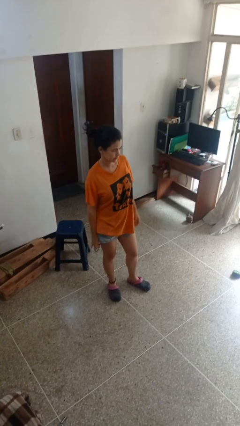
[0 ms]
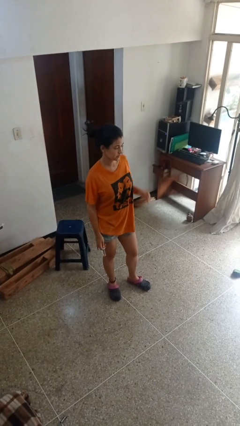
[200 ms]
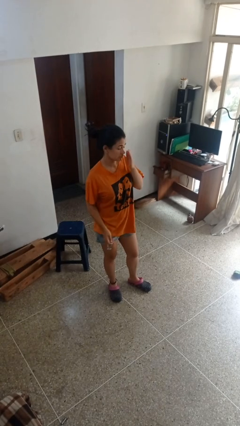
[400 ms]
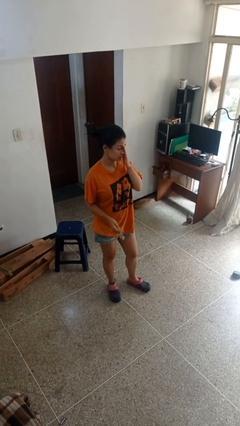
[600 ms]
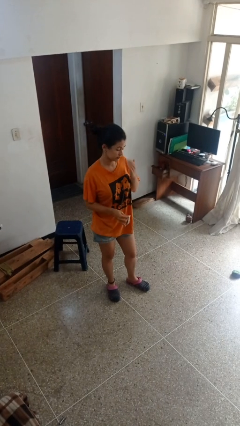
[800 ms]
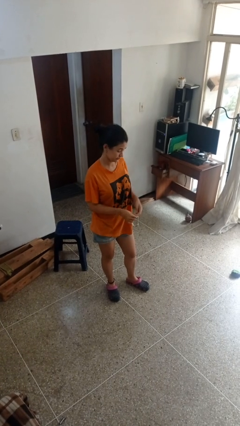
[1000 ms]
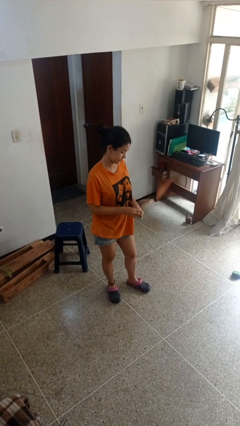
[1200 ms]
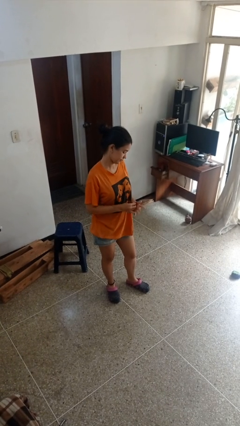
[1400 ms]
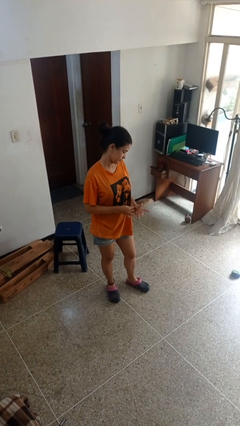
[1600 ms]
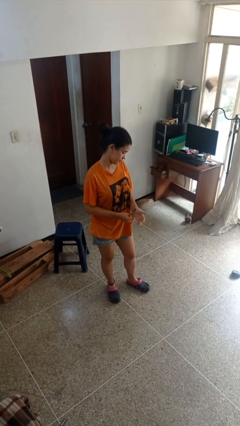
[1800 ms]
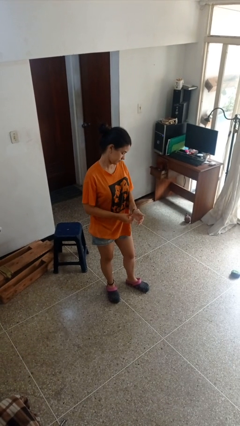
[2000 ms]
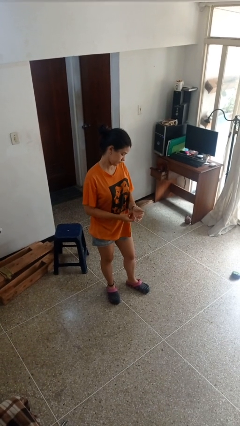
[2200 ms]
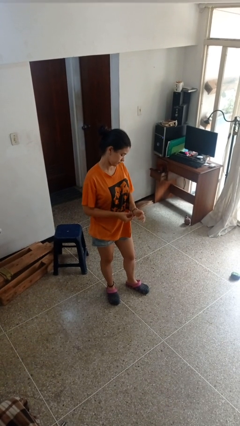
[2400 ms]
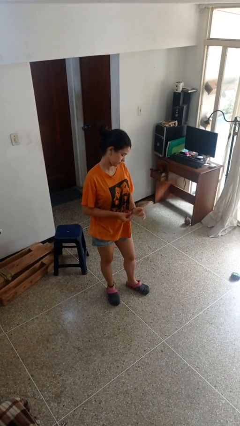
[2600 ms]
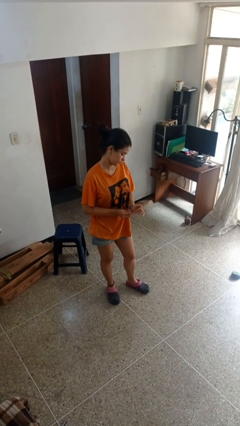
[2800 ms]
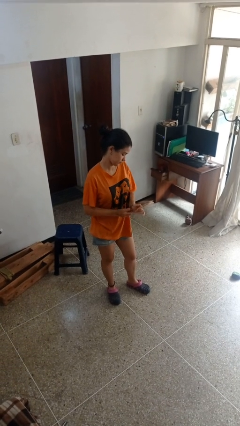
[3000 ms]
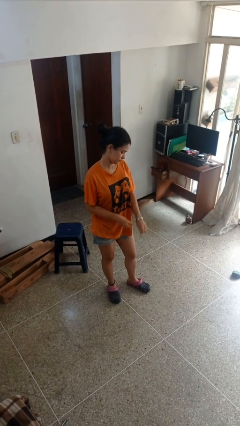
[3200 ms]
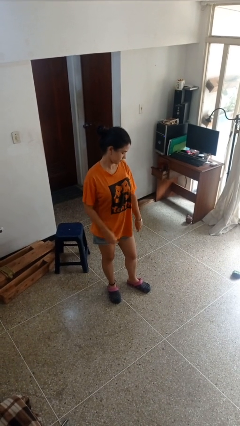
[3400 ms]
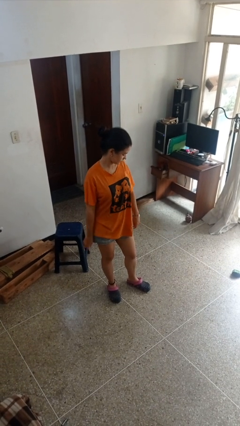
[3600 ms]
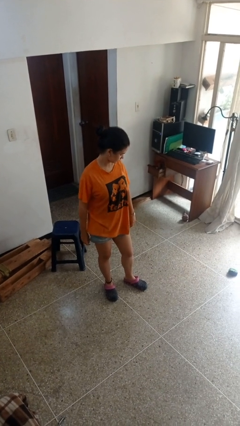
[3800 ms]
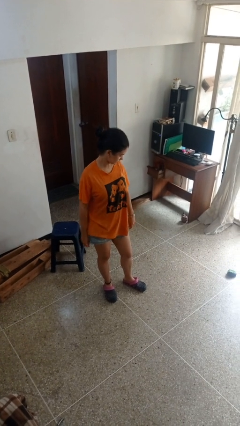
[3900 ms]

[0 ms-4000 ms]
person puts on wristwatch

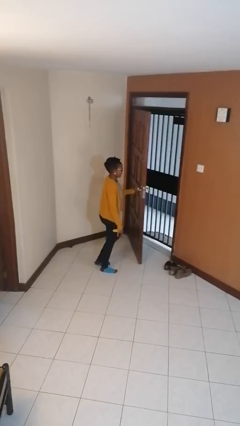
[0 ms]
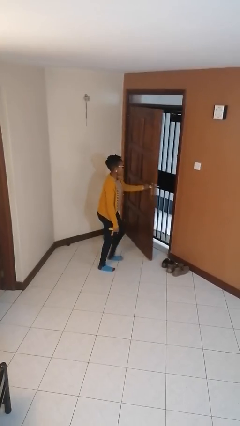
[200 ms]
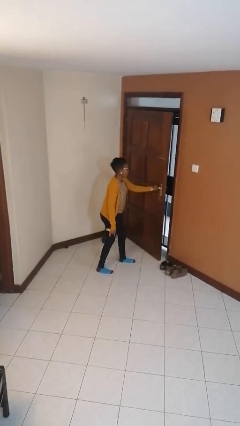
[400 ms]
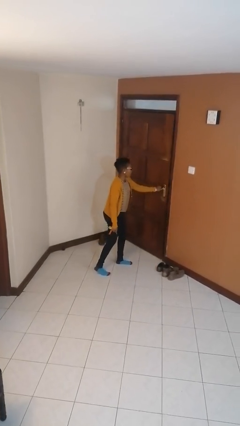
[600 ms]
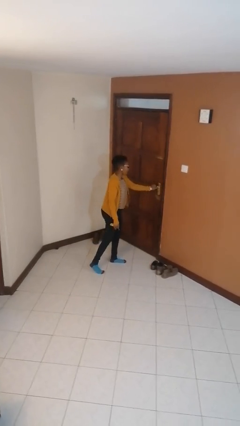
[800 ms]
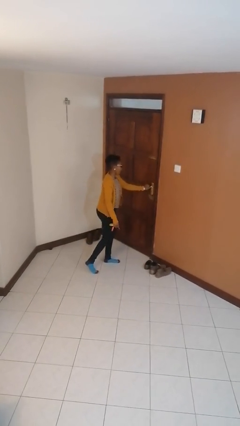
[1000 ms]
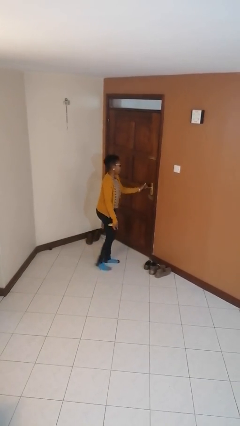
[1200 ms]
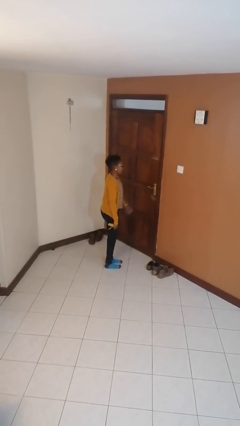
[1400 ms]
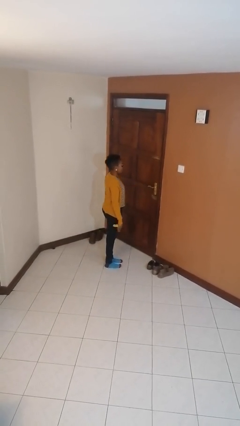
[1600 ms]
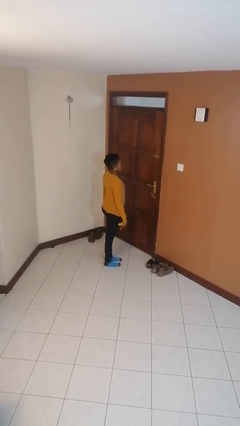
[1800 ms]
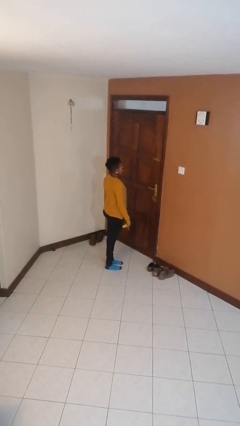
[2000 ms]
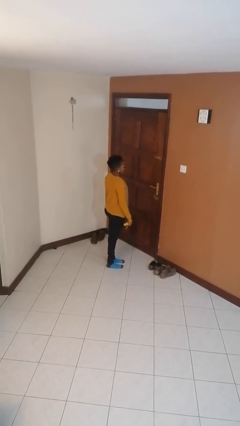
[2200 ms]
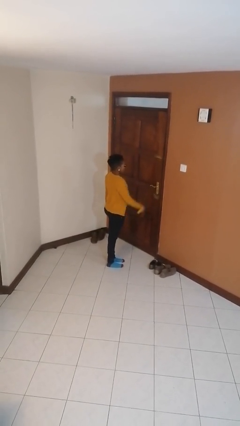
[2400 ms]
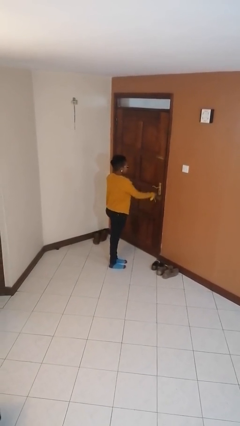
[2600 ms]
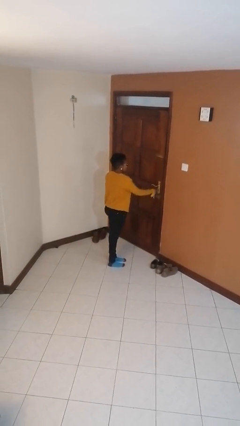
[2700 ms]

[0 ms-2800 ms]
person closes facility door

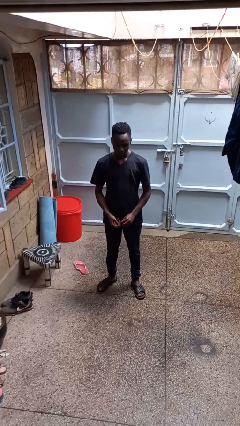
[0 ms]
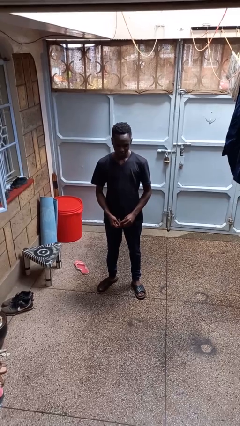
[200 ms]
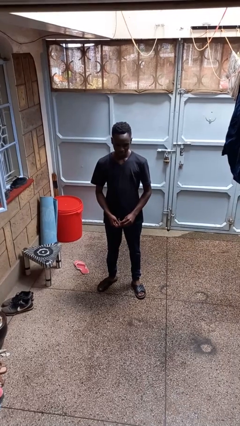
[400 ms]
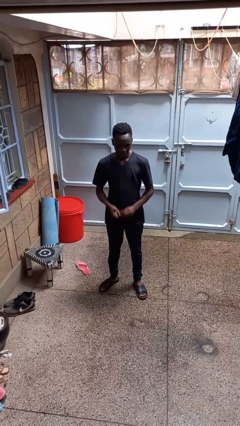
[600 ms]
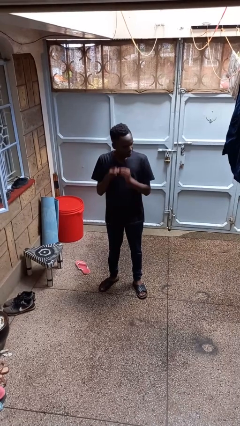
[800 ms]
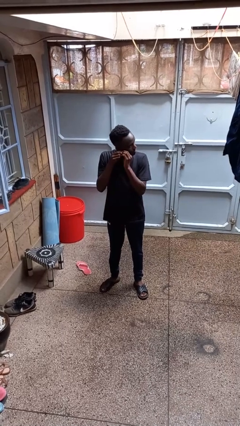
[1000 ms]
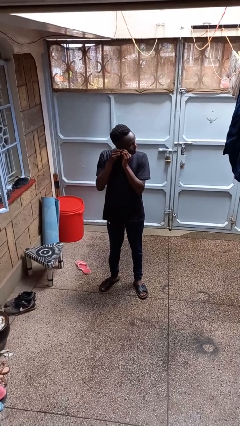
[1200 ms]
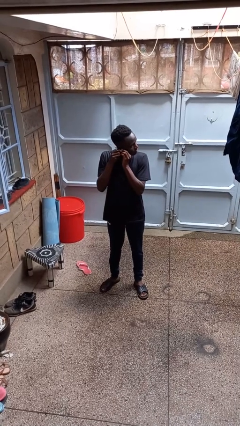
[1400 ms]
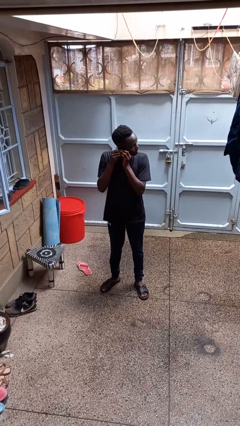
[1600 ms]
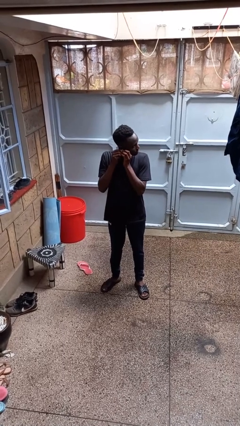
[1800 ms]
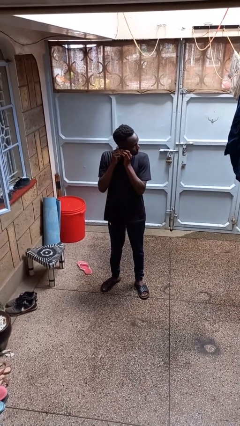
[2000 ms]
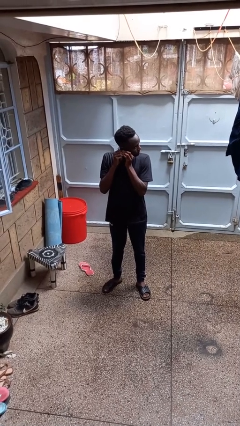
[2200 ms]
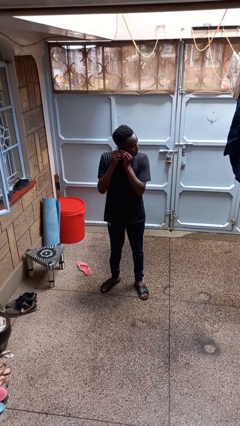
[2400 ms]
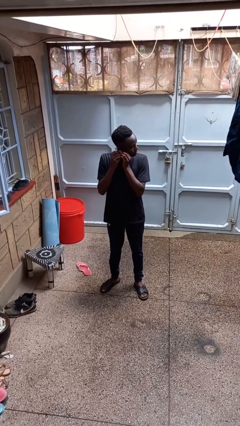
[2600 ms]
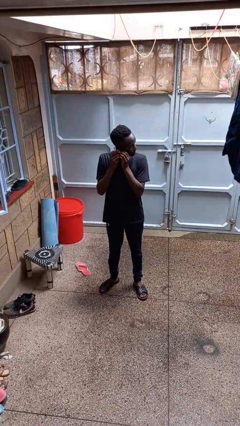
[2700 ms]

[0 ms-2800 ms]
person puts on earrings

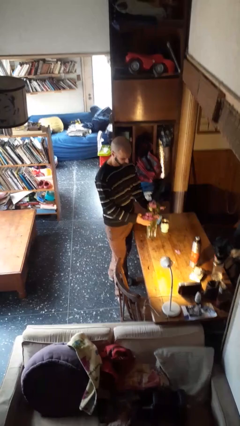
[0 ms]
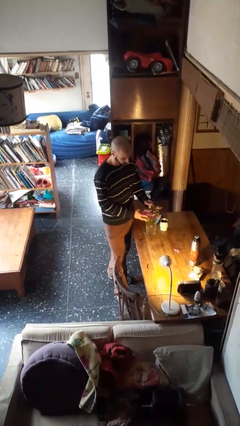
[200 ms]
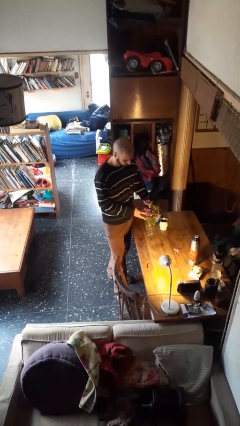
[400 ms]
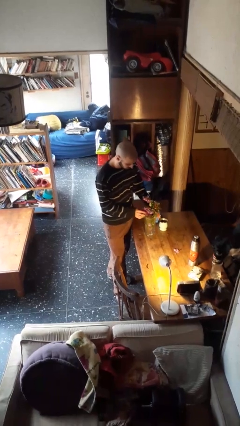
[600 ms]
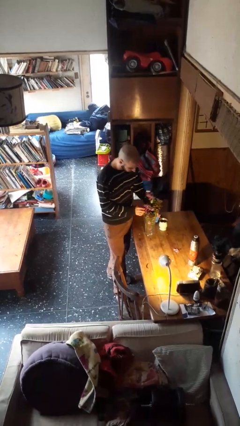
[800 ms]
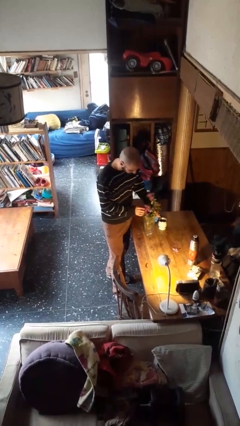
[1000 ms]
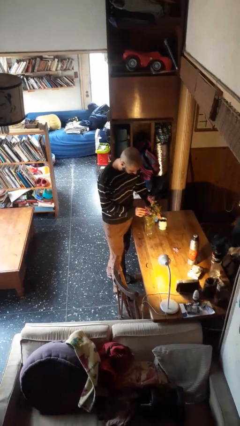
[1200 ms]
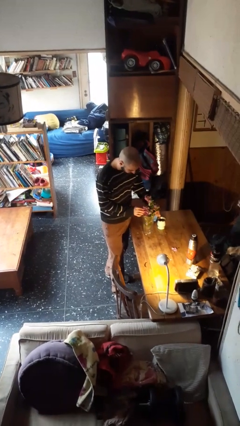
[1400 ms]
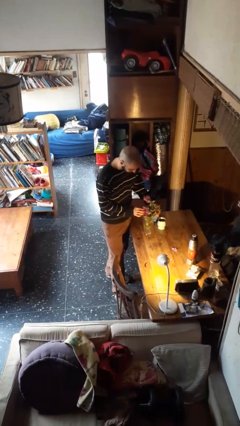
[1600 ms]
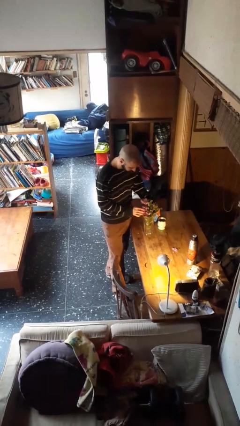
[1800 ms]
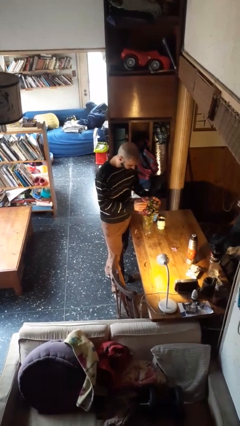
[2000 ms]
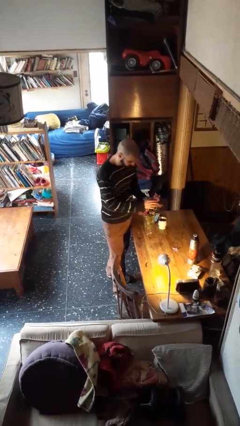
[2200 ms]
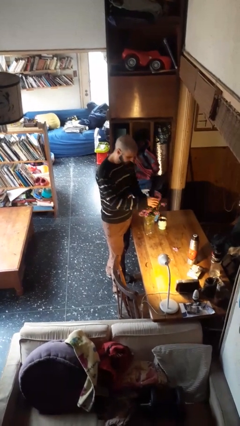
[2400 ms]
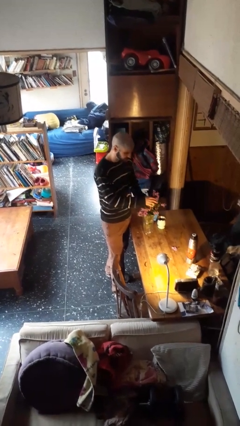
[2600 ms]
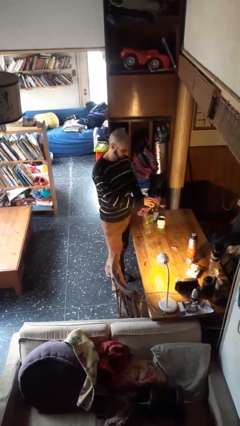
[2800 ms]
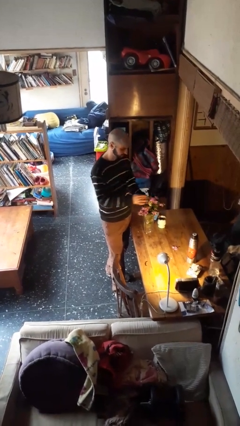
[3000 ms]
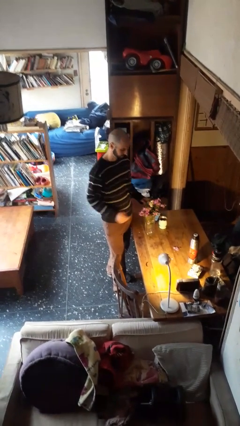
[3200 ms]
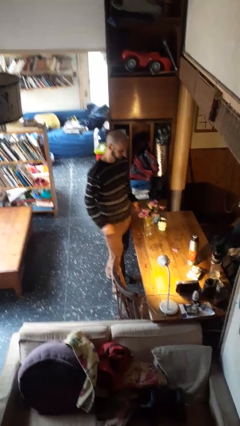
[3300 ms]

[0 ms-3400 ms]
person arranges flowers in vase

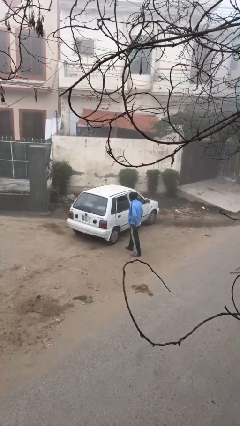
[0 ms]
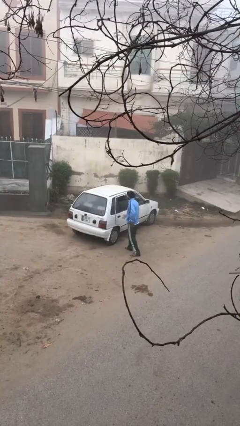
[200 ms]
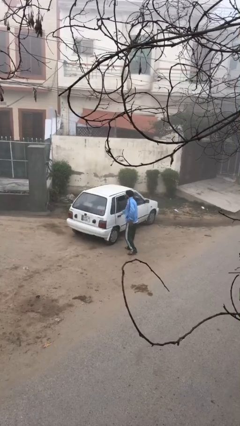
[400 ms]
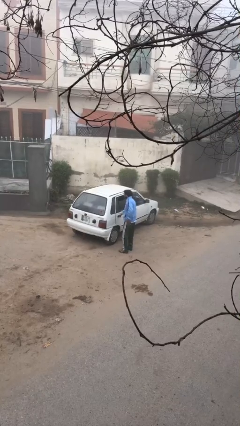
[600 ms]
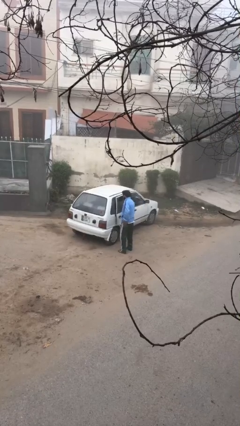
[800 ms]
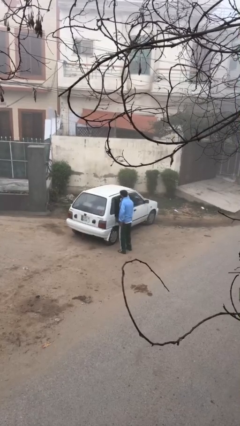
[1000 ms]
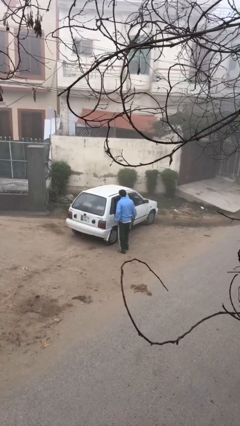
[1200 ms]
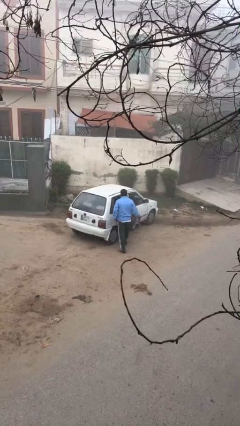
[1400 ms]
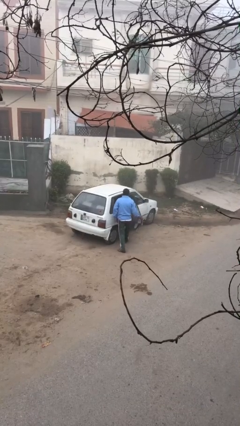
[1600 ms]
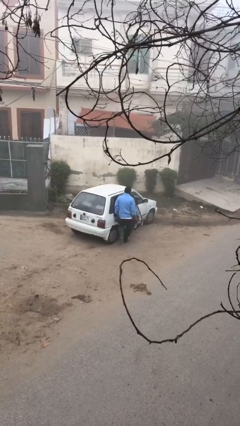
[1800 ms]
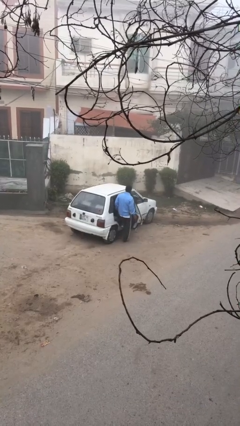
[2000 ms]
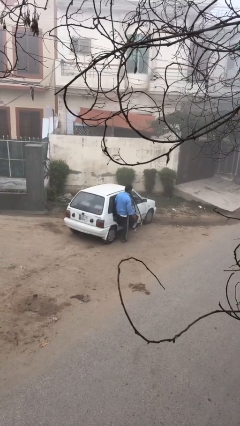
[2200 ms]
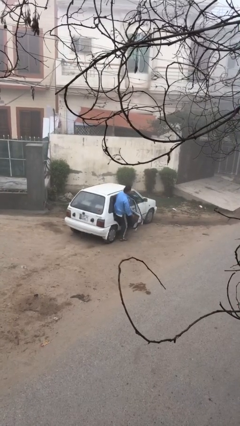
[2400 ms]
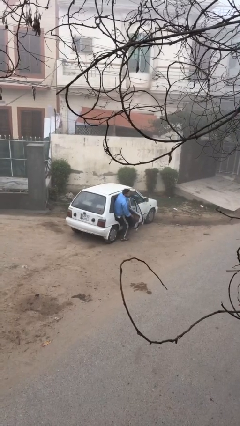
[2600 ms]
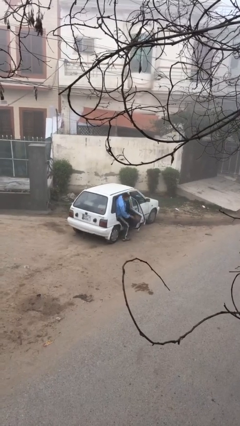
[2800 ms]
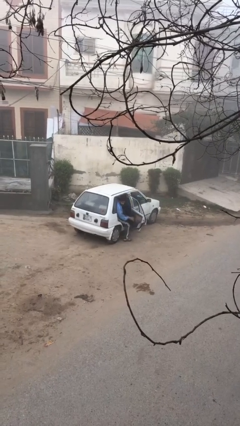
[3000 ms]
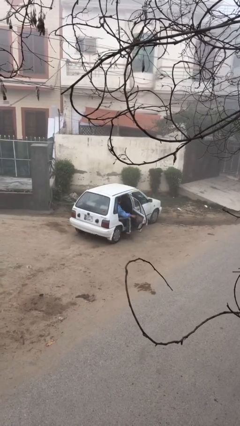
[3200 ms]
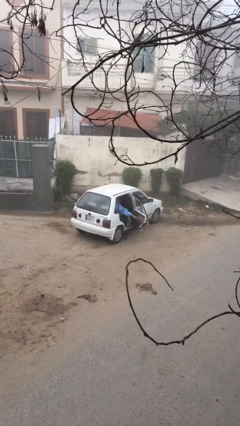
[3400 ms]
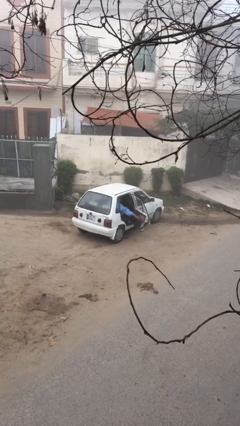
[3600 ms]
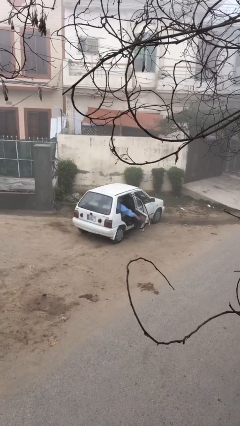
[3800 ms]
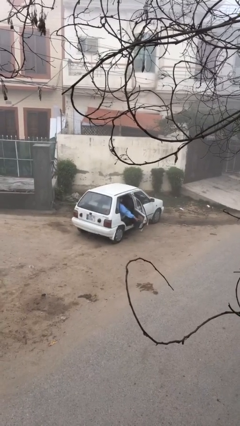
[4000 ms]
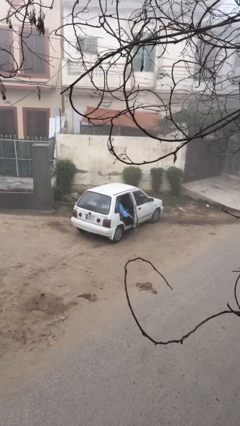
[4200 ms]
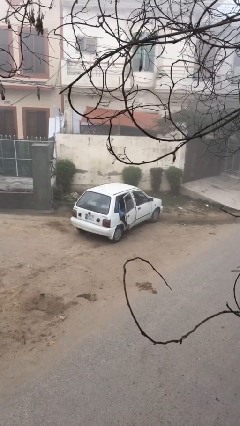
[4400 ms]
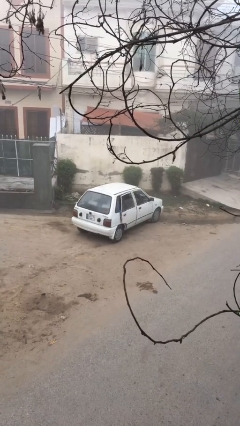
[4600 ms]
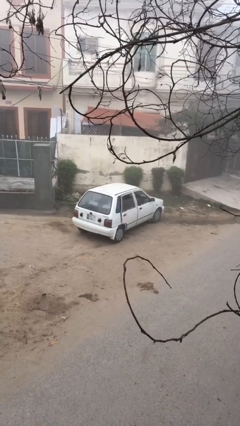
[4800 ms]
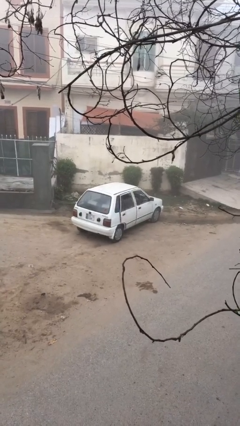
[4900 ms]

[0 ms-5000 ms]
car picks up person
